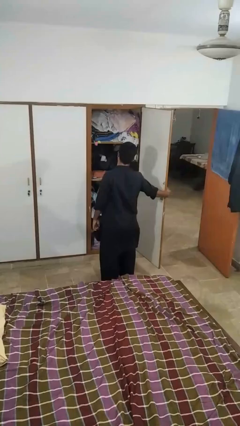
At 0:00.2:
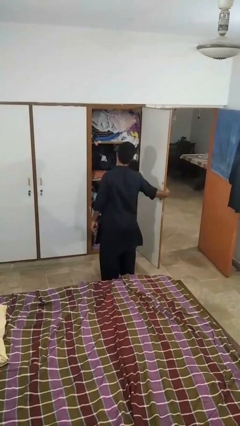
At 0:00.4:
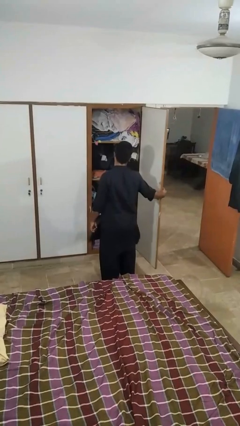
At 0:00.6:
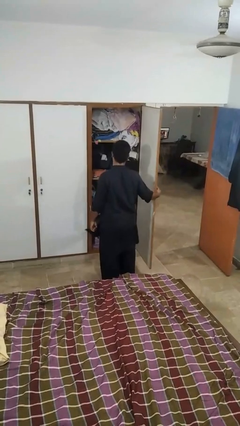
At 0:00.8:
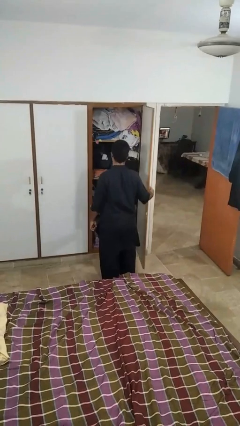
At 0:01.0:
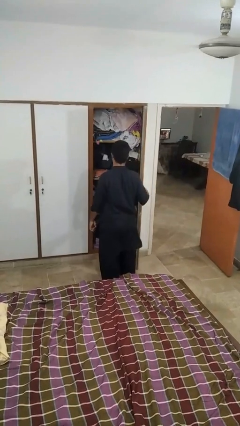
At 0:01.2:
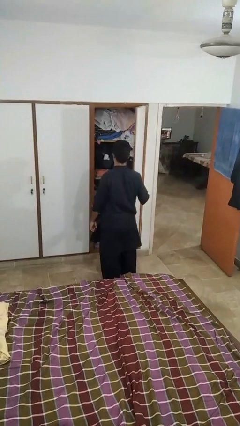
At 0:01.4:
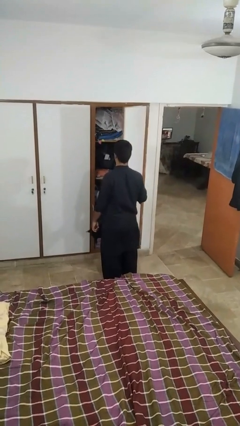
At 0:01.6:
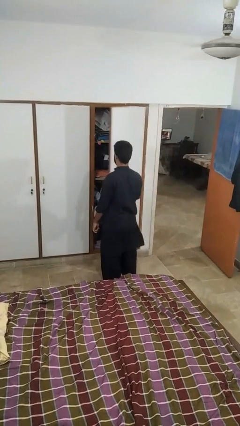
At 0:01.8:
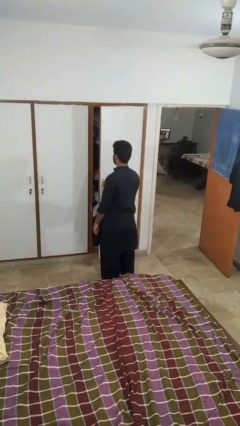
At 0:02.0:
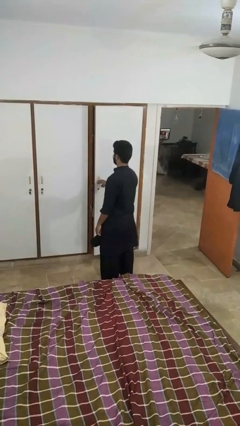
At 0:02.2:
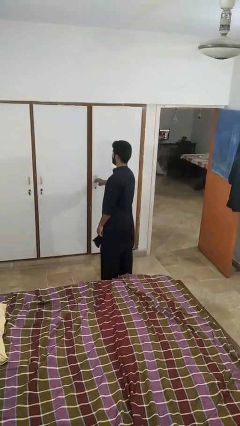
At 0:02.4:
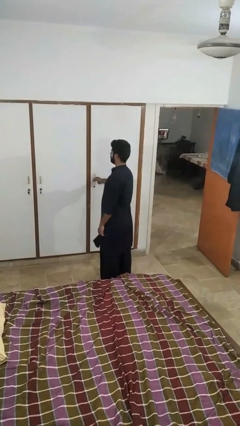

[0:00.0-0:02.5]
person closes closet door

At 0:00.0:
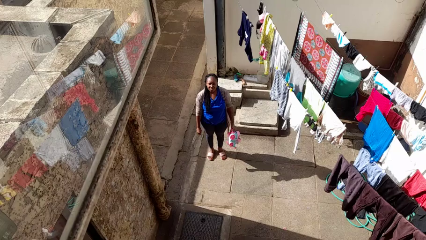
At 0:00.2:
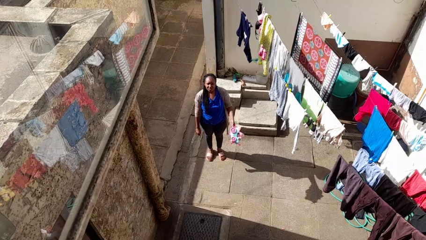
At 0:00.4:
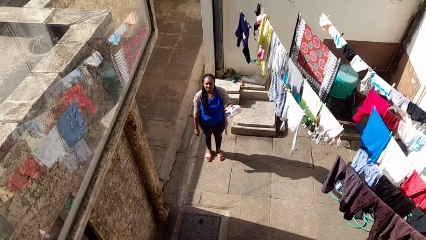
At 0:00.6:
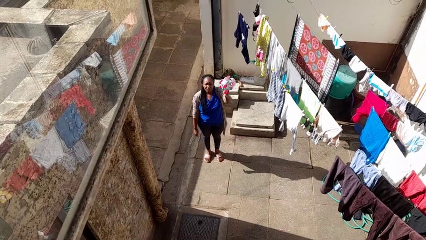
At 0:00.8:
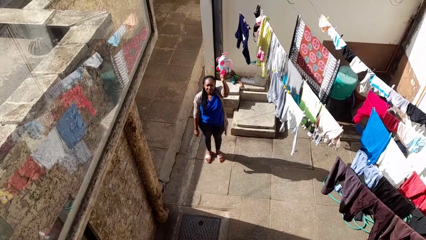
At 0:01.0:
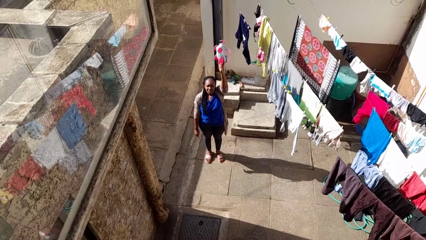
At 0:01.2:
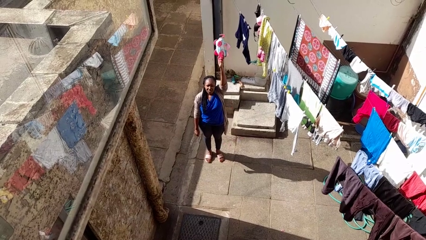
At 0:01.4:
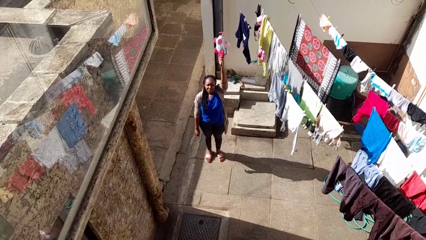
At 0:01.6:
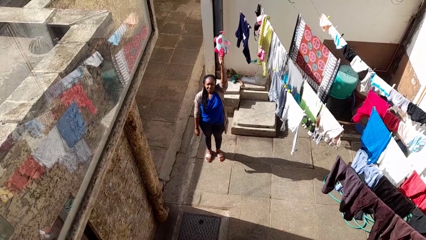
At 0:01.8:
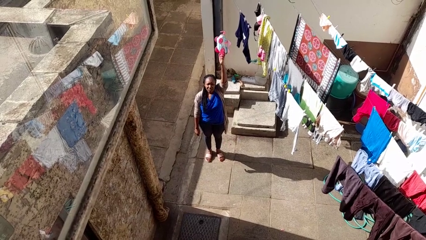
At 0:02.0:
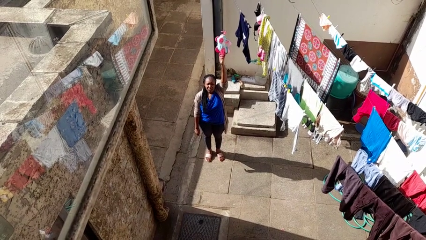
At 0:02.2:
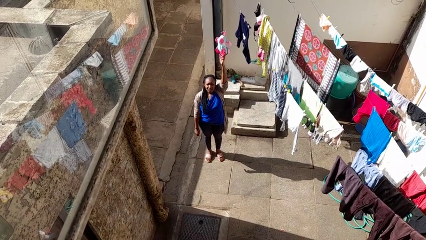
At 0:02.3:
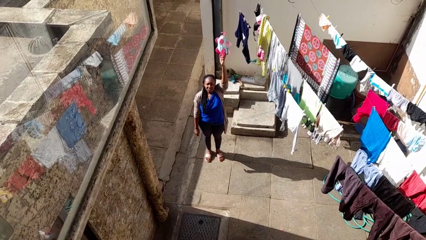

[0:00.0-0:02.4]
person holds object above head

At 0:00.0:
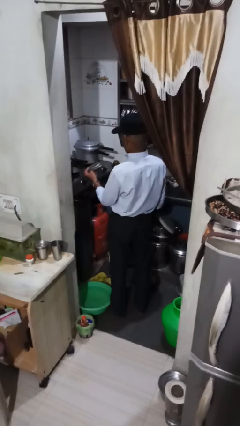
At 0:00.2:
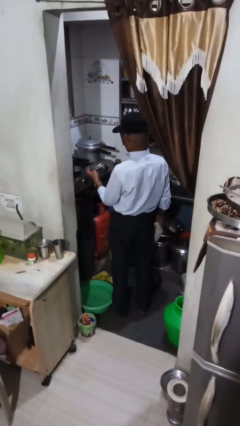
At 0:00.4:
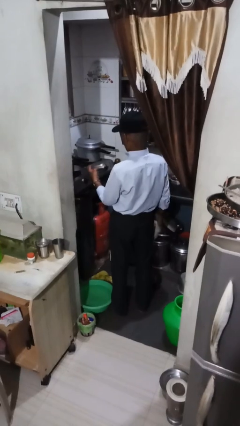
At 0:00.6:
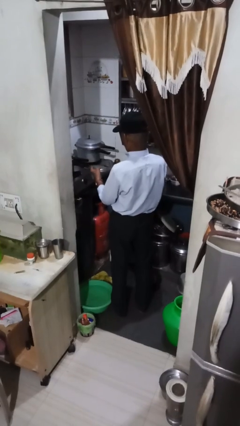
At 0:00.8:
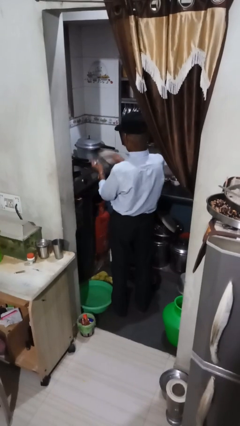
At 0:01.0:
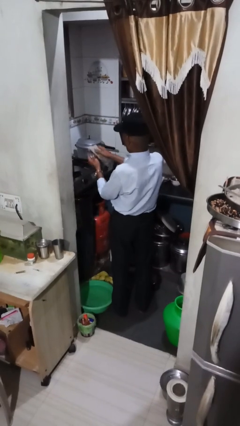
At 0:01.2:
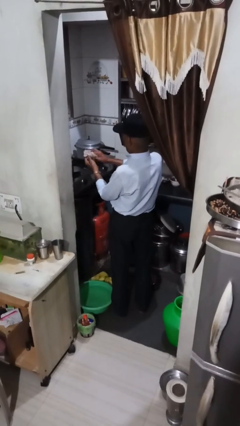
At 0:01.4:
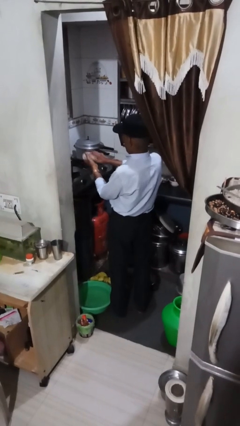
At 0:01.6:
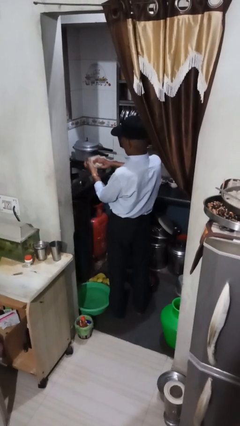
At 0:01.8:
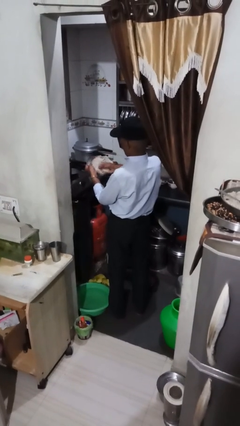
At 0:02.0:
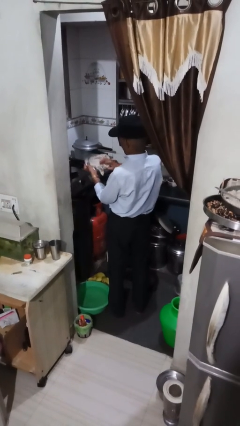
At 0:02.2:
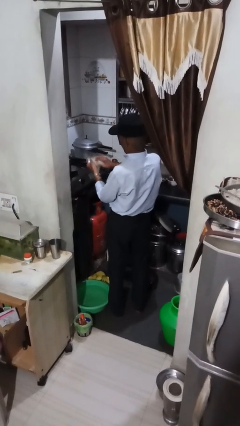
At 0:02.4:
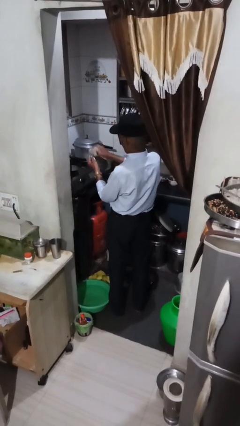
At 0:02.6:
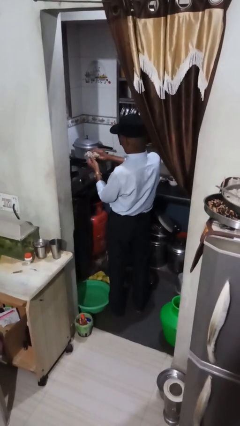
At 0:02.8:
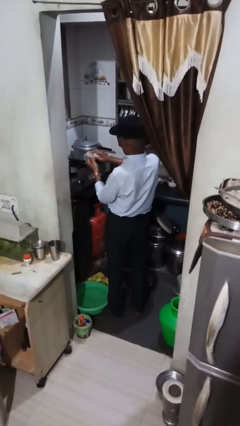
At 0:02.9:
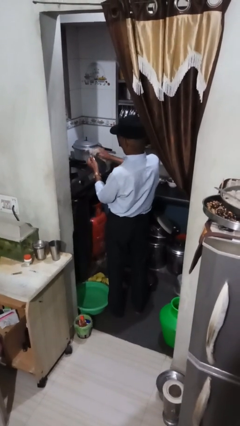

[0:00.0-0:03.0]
person dries dish

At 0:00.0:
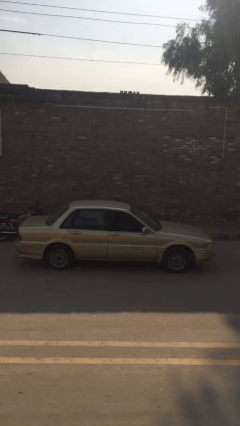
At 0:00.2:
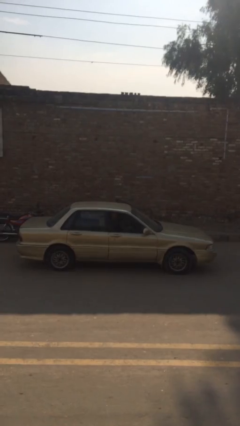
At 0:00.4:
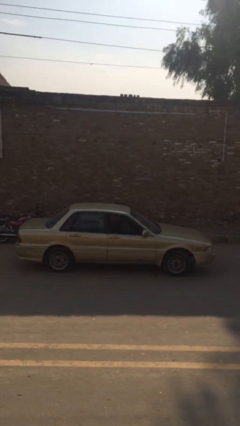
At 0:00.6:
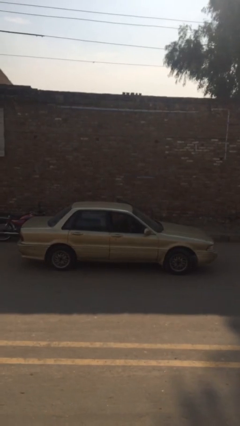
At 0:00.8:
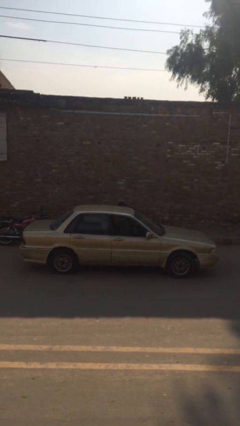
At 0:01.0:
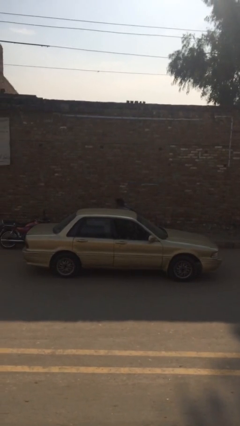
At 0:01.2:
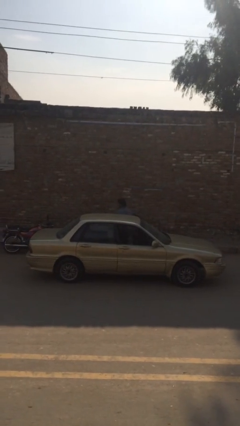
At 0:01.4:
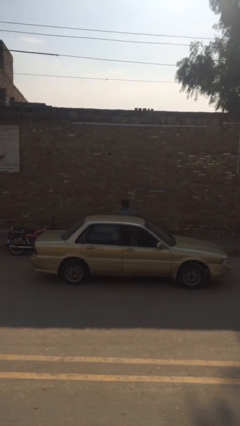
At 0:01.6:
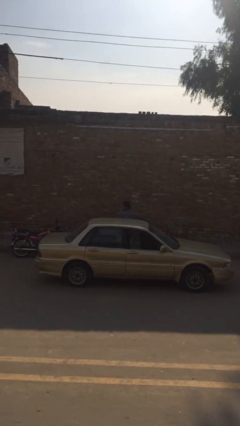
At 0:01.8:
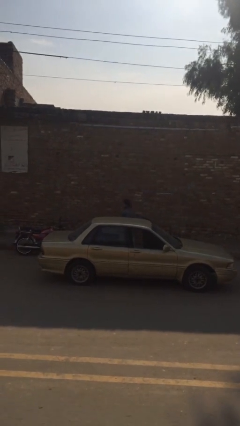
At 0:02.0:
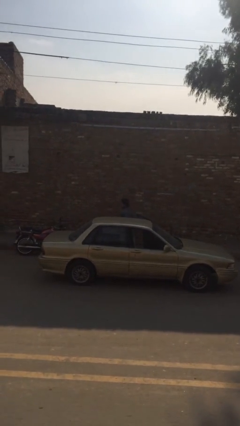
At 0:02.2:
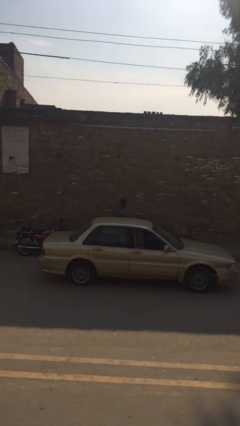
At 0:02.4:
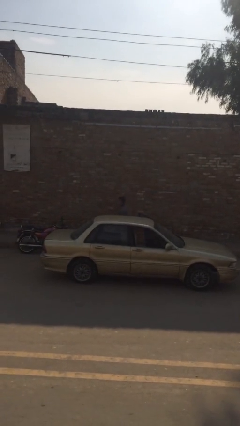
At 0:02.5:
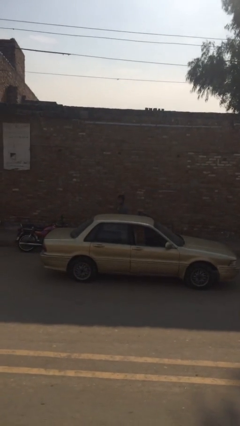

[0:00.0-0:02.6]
person exits car

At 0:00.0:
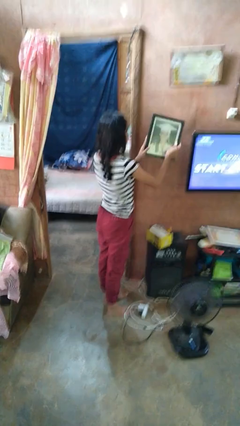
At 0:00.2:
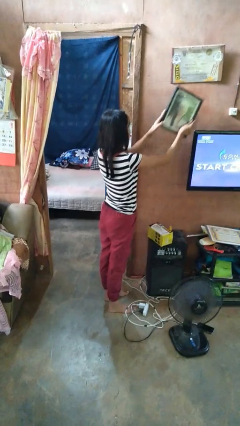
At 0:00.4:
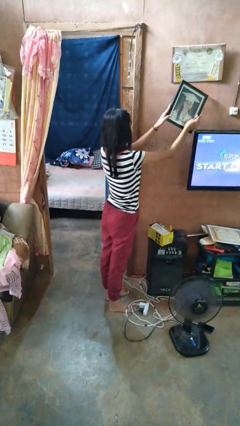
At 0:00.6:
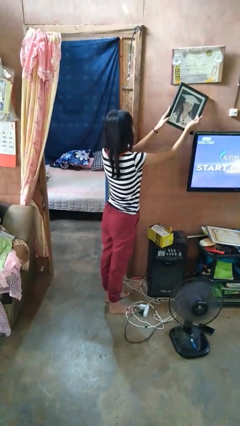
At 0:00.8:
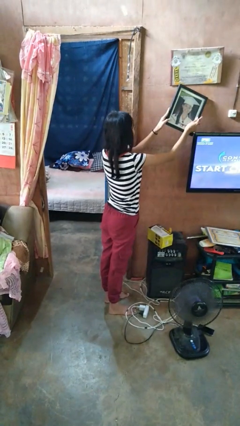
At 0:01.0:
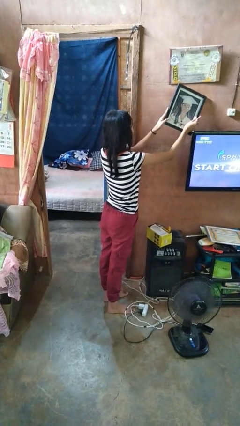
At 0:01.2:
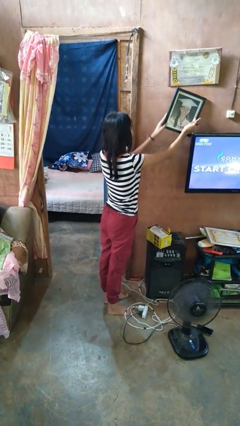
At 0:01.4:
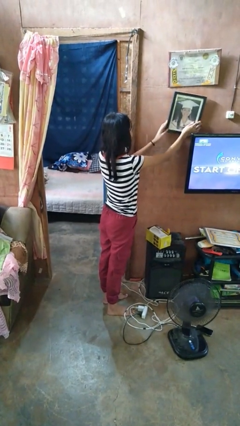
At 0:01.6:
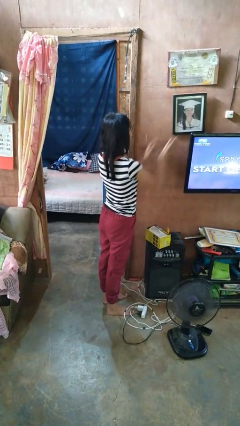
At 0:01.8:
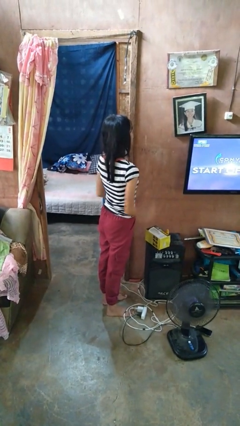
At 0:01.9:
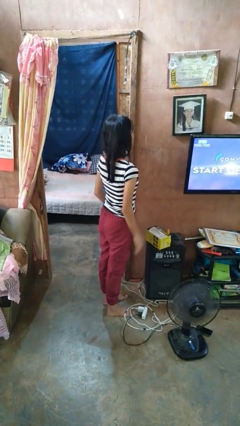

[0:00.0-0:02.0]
person puts up picture frame

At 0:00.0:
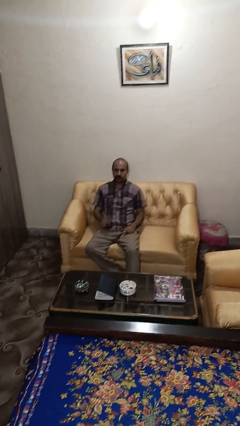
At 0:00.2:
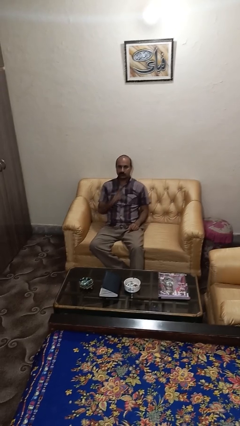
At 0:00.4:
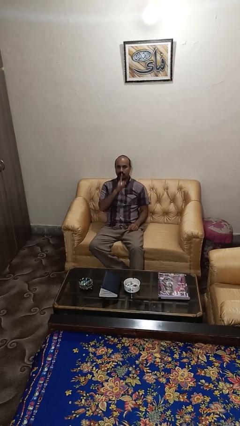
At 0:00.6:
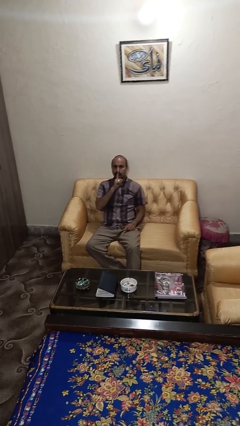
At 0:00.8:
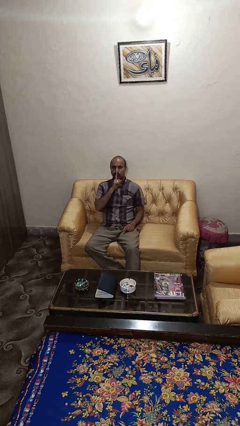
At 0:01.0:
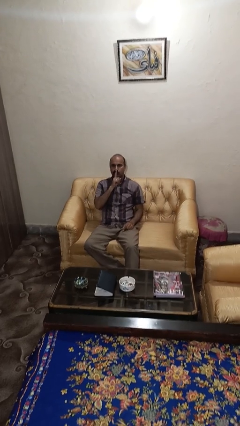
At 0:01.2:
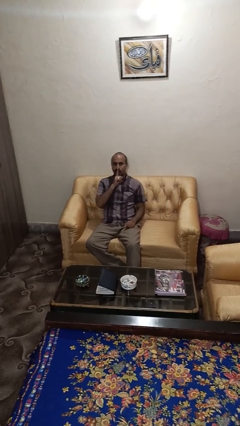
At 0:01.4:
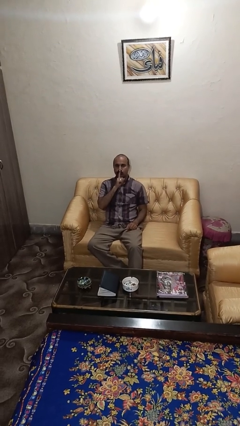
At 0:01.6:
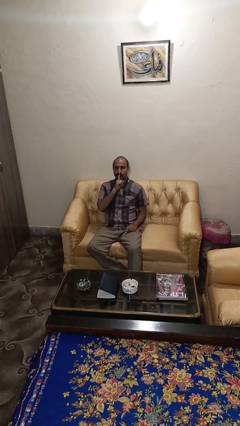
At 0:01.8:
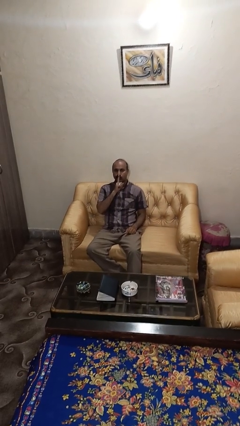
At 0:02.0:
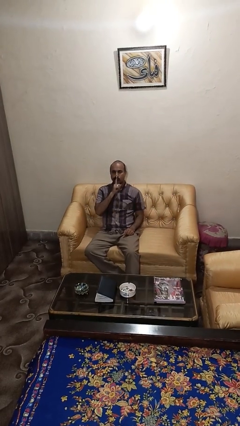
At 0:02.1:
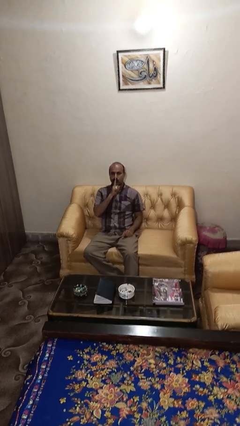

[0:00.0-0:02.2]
person gestures be quiet

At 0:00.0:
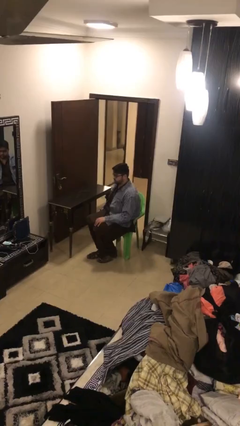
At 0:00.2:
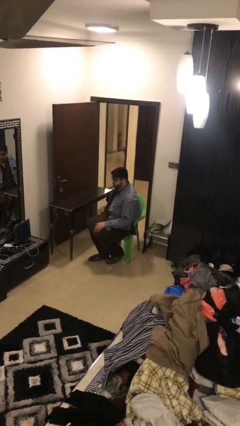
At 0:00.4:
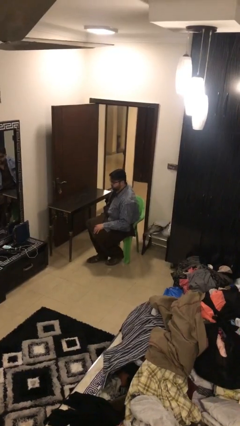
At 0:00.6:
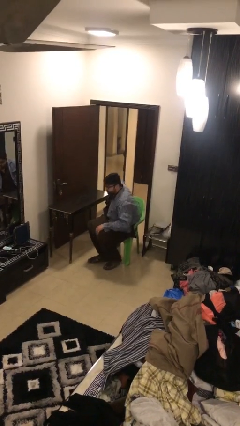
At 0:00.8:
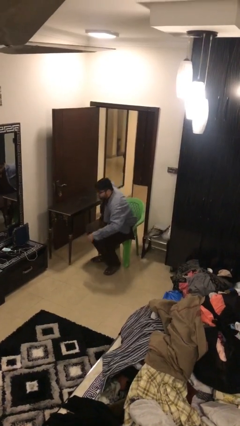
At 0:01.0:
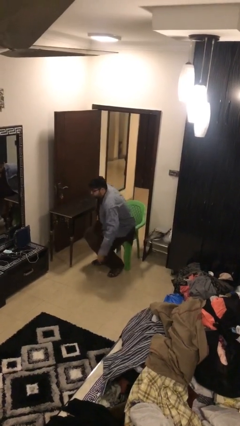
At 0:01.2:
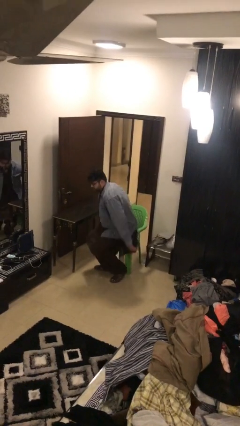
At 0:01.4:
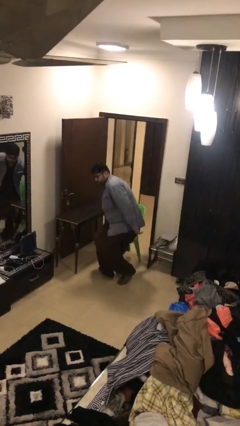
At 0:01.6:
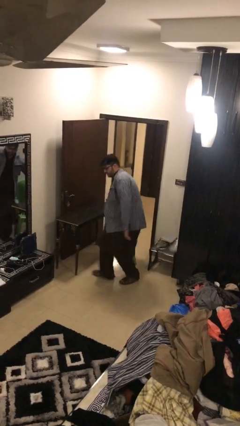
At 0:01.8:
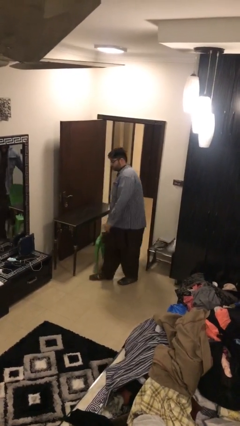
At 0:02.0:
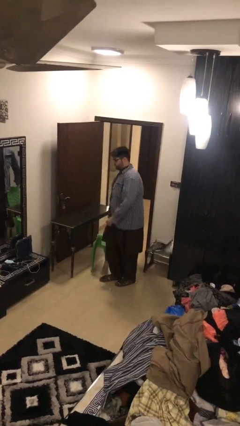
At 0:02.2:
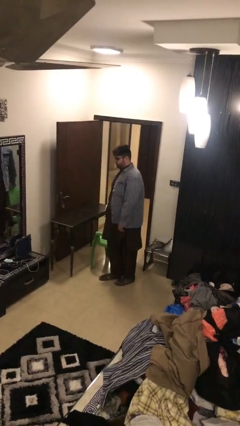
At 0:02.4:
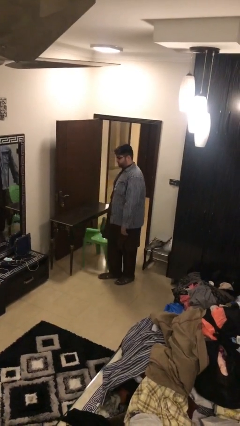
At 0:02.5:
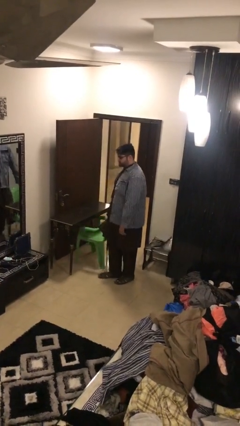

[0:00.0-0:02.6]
person stands up

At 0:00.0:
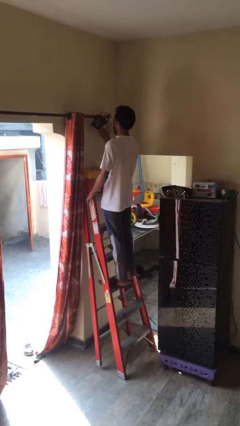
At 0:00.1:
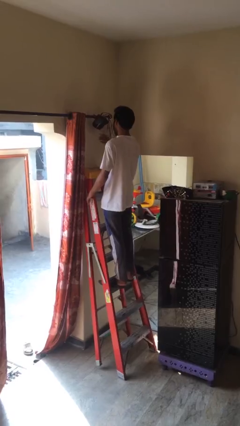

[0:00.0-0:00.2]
person climbs down ladder
